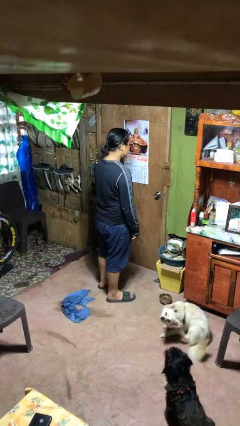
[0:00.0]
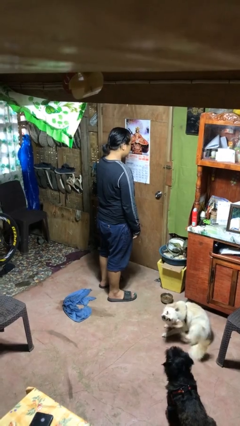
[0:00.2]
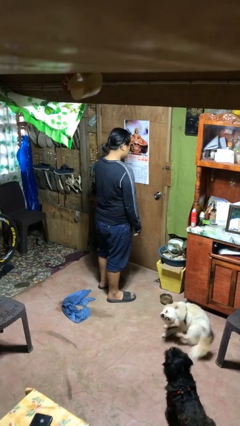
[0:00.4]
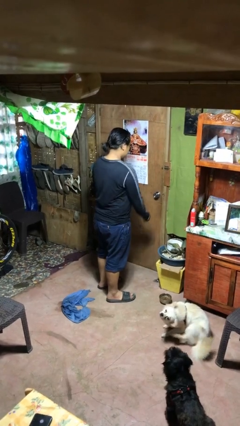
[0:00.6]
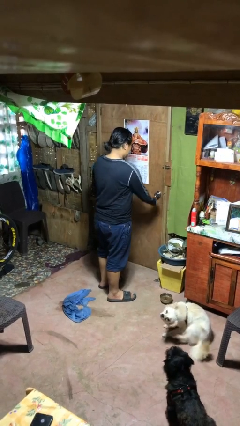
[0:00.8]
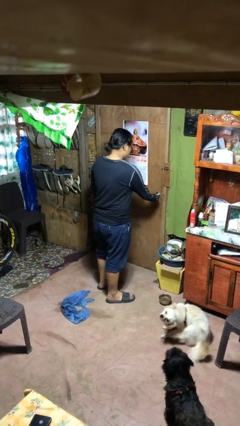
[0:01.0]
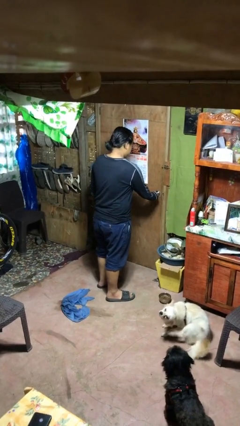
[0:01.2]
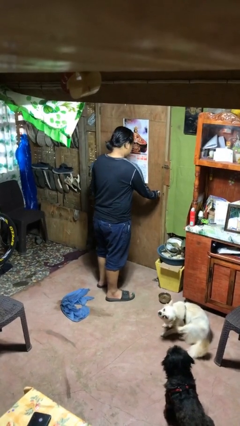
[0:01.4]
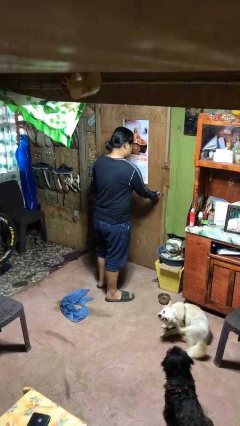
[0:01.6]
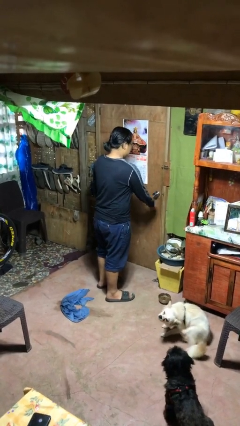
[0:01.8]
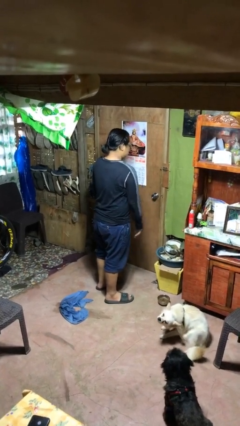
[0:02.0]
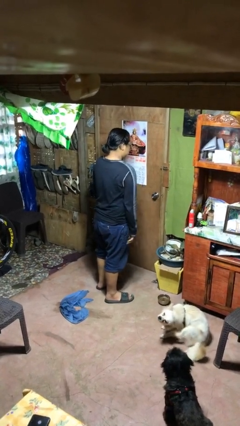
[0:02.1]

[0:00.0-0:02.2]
person unlocks door with keys

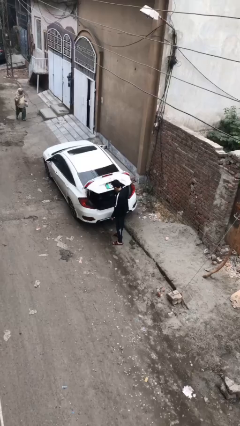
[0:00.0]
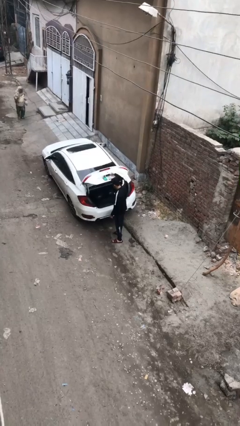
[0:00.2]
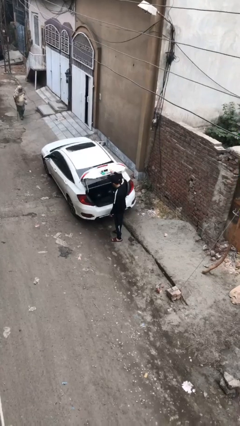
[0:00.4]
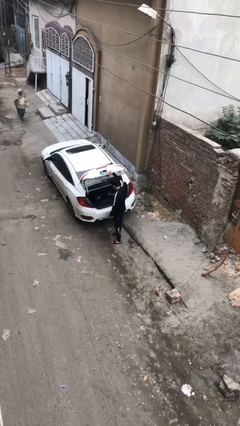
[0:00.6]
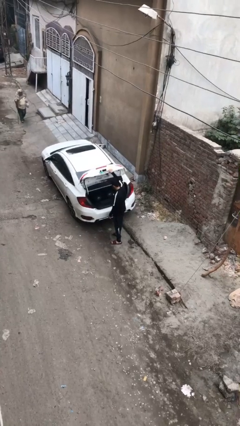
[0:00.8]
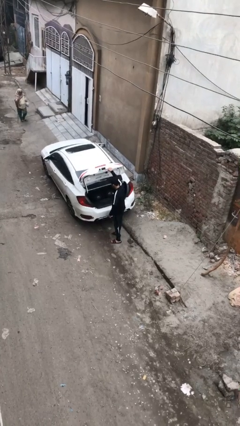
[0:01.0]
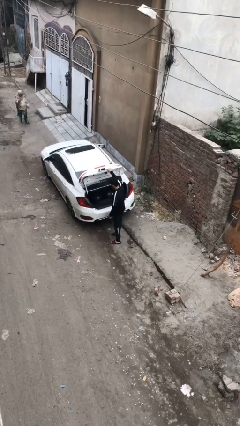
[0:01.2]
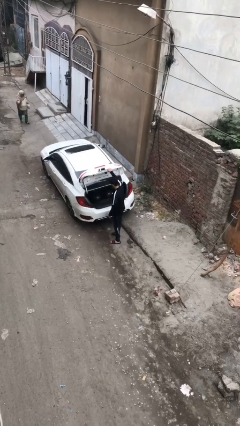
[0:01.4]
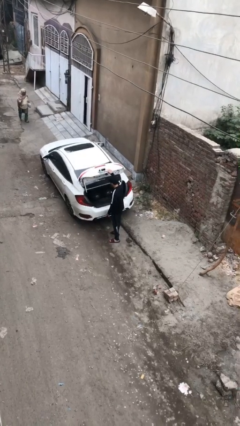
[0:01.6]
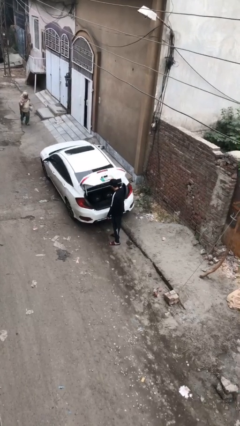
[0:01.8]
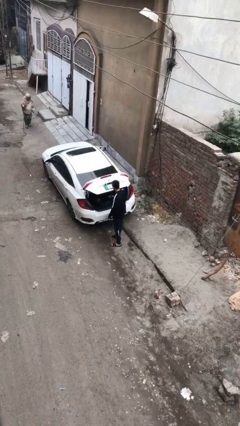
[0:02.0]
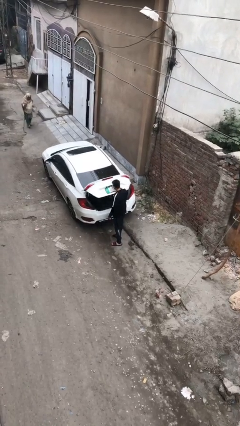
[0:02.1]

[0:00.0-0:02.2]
person opens car trunk

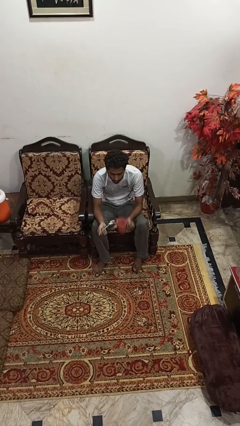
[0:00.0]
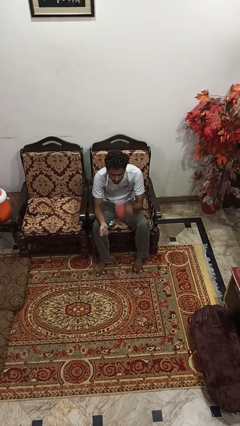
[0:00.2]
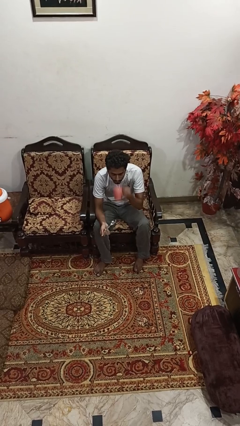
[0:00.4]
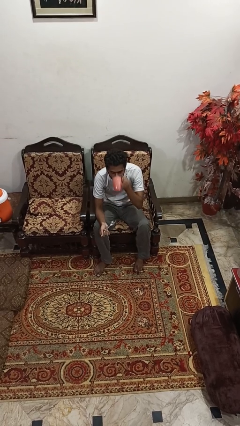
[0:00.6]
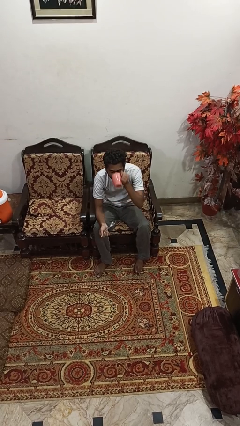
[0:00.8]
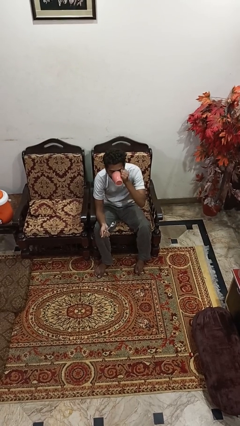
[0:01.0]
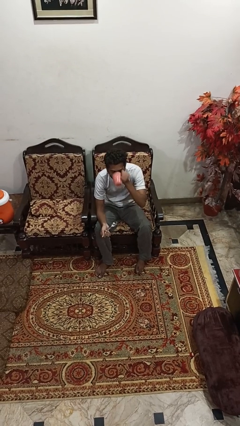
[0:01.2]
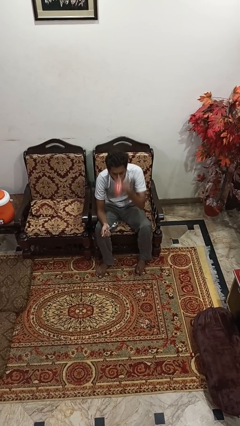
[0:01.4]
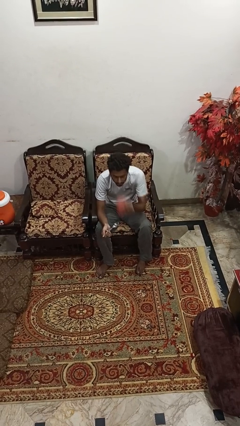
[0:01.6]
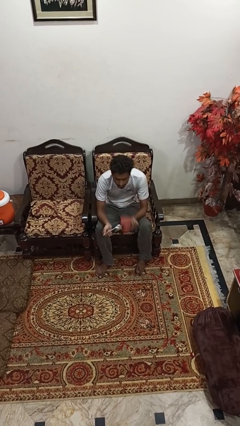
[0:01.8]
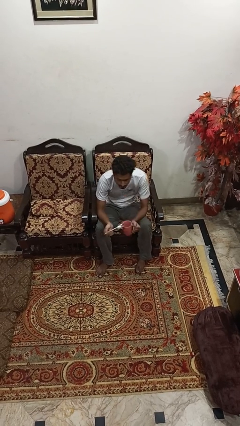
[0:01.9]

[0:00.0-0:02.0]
person drinks from mug

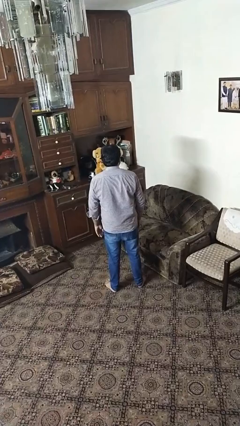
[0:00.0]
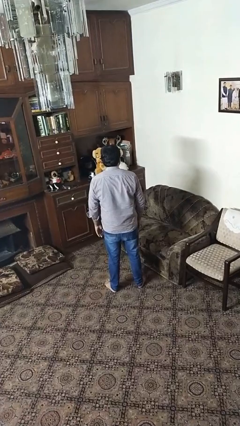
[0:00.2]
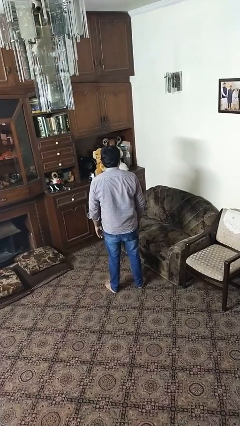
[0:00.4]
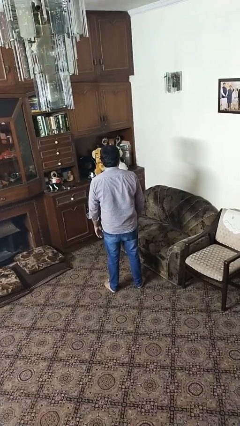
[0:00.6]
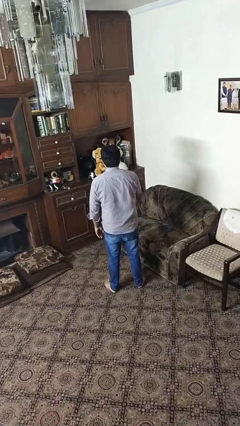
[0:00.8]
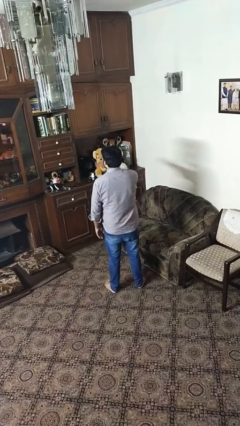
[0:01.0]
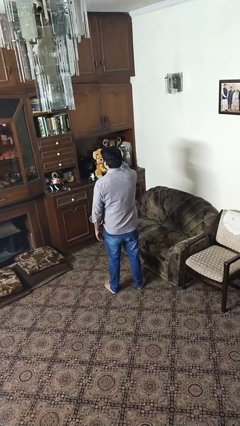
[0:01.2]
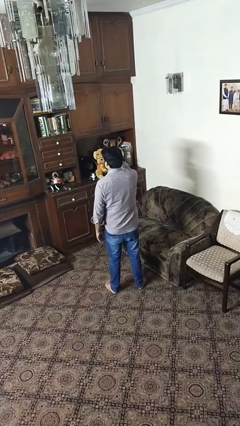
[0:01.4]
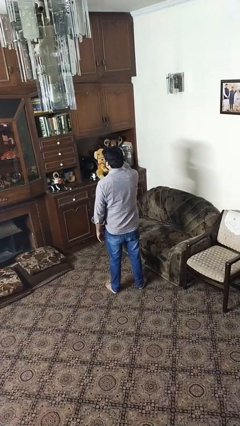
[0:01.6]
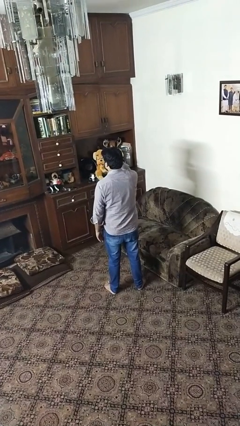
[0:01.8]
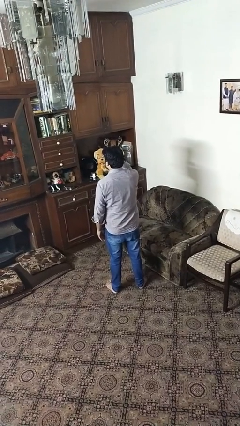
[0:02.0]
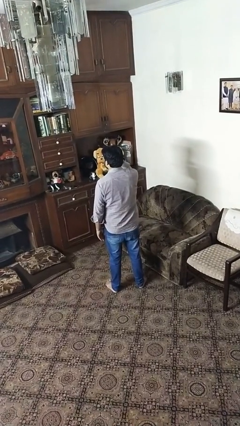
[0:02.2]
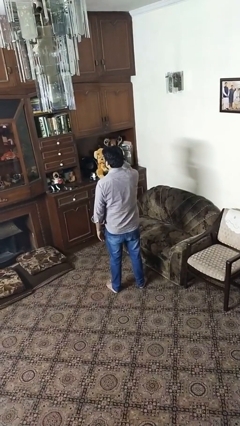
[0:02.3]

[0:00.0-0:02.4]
person salutes

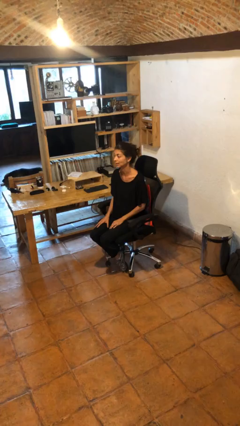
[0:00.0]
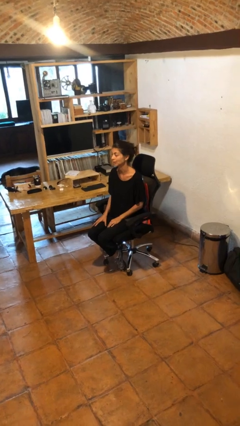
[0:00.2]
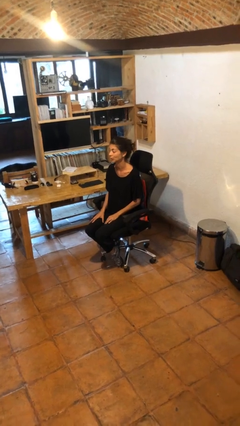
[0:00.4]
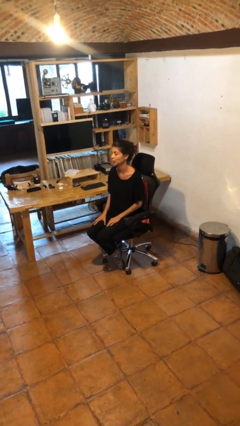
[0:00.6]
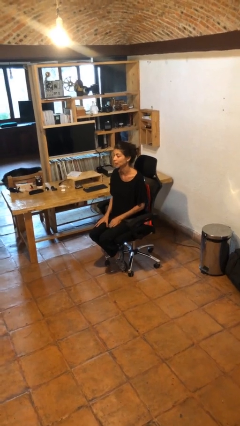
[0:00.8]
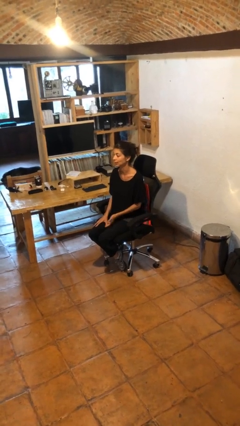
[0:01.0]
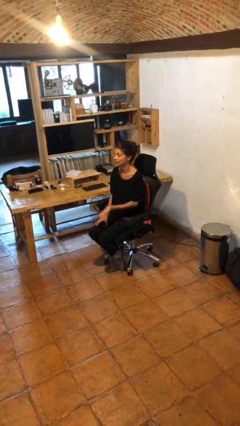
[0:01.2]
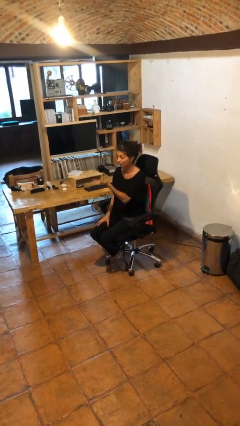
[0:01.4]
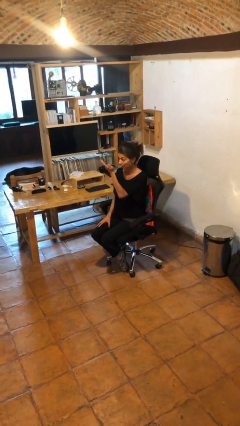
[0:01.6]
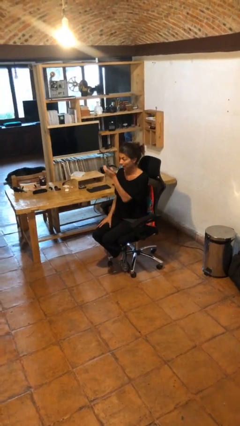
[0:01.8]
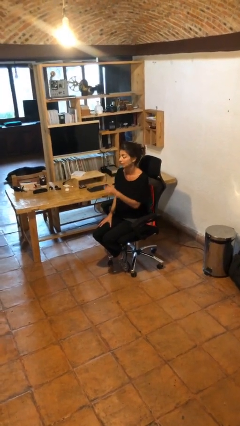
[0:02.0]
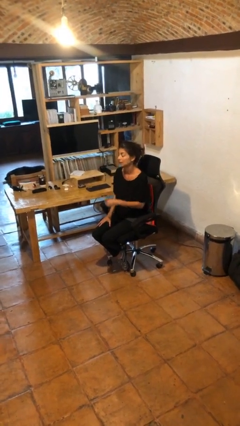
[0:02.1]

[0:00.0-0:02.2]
person gestures swipe up

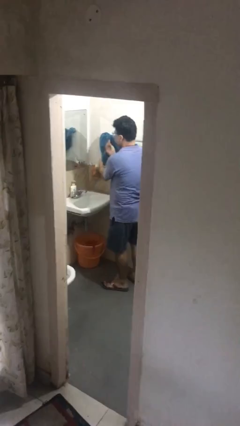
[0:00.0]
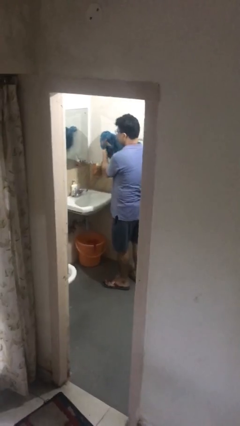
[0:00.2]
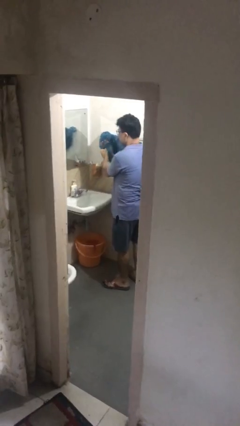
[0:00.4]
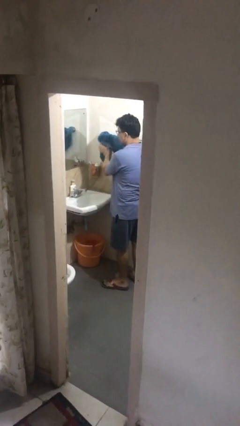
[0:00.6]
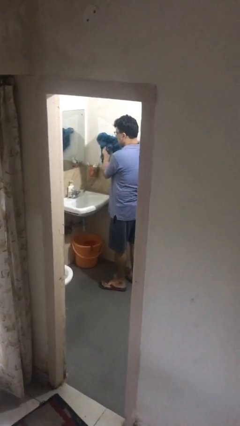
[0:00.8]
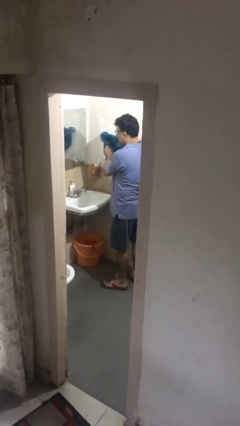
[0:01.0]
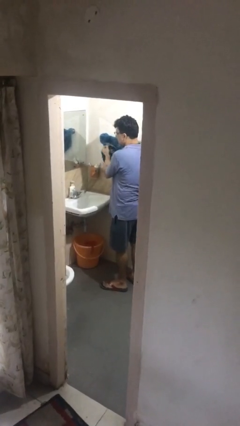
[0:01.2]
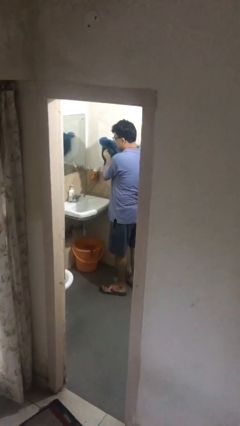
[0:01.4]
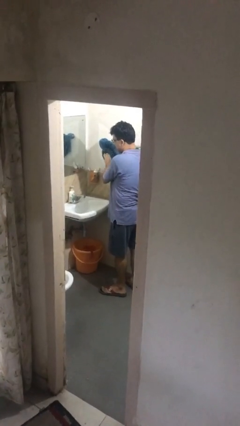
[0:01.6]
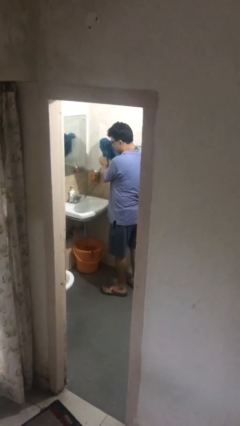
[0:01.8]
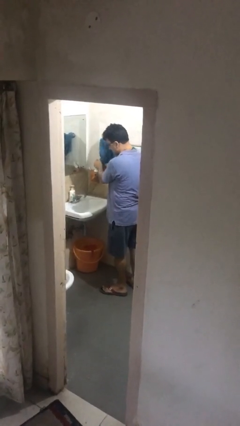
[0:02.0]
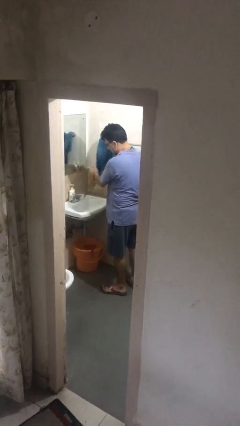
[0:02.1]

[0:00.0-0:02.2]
person dries hands with towel

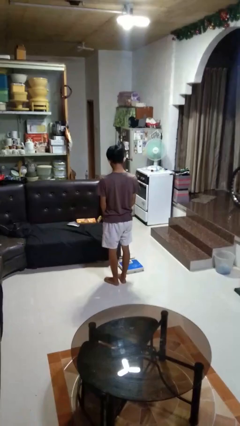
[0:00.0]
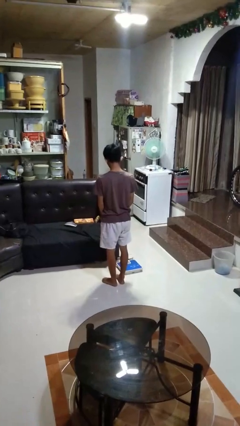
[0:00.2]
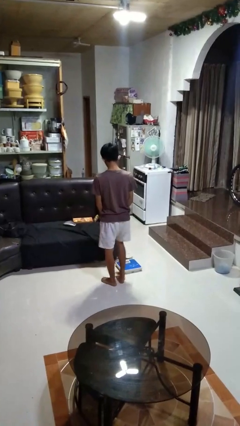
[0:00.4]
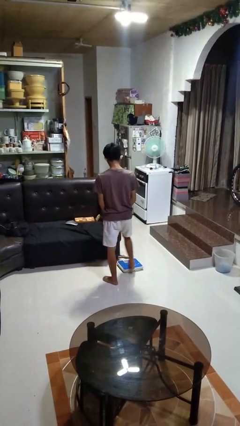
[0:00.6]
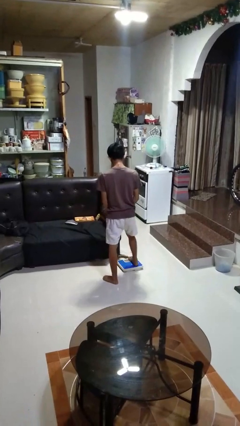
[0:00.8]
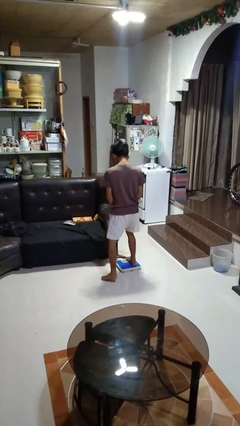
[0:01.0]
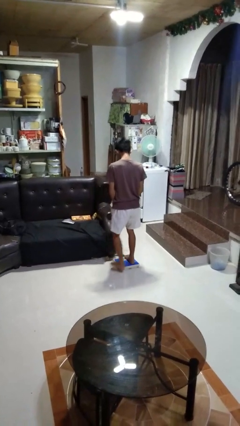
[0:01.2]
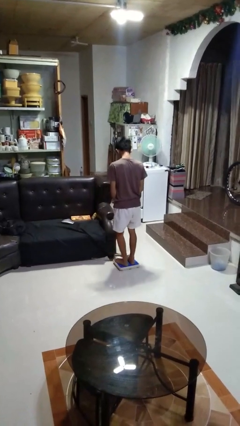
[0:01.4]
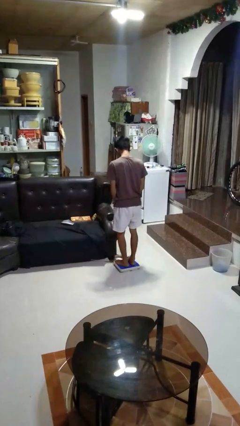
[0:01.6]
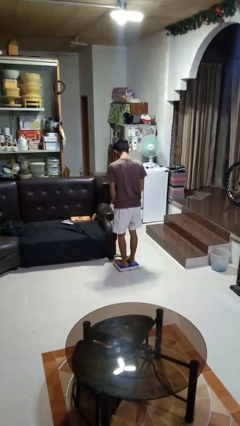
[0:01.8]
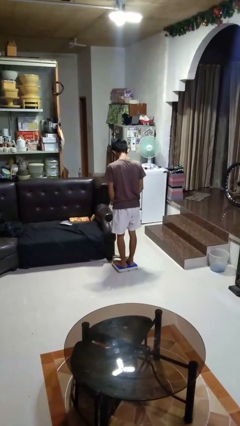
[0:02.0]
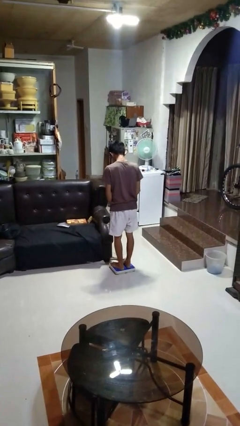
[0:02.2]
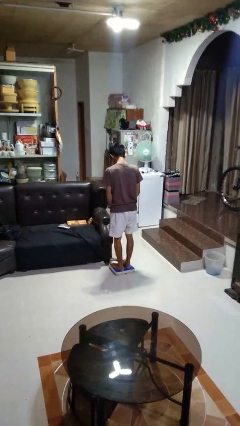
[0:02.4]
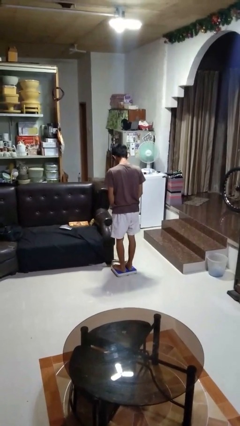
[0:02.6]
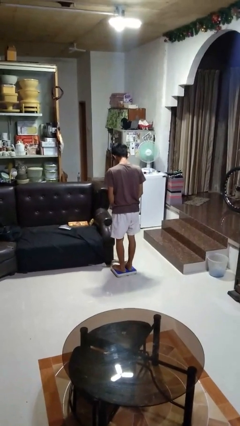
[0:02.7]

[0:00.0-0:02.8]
person uses bodyweight scale

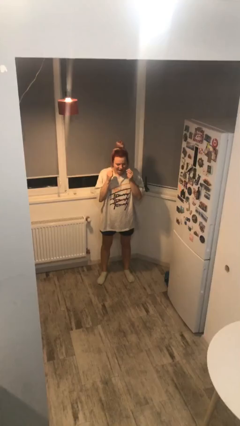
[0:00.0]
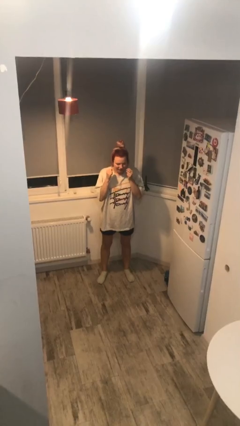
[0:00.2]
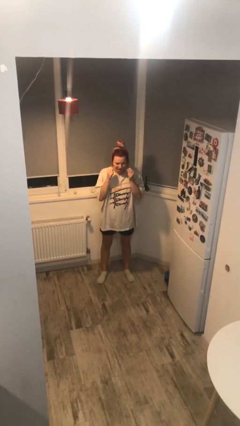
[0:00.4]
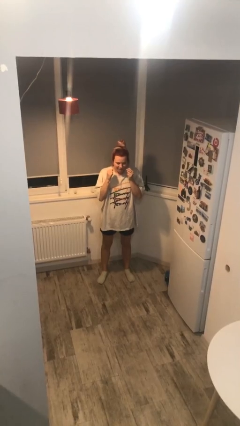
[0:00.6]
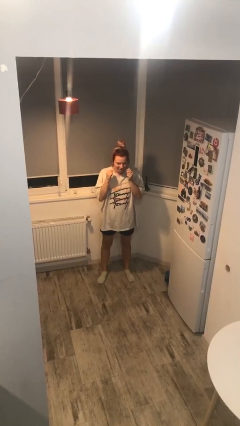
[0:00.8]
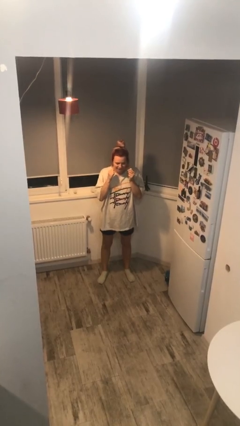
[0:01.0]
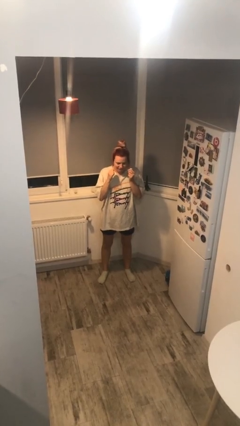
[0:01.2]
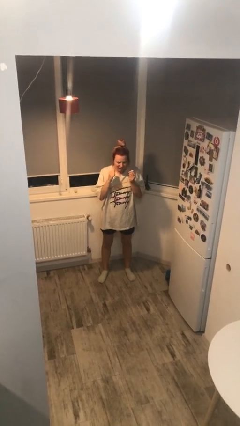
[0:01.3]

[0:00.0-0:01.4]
person flosses
